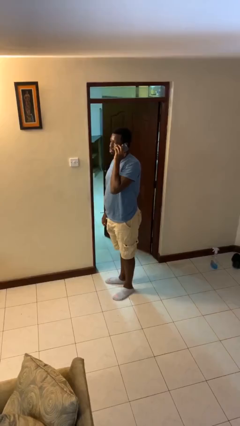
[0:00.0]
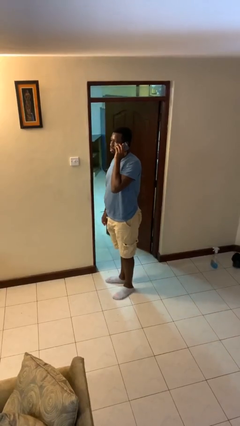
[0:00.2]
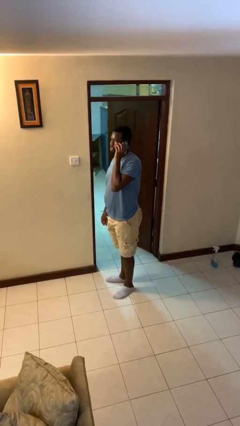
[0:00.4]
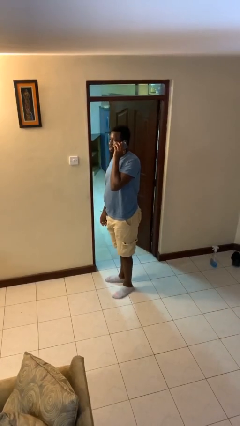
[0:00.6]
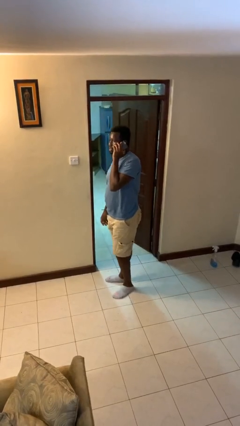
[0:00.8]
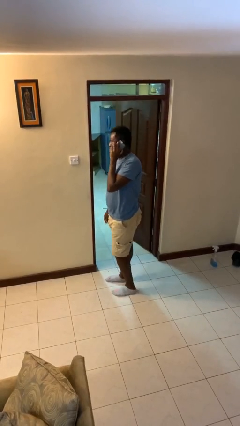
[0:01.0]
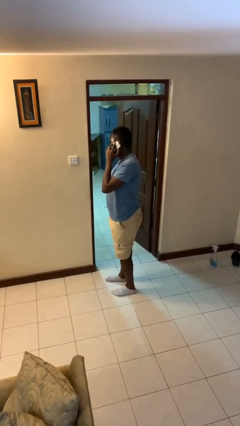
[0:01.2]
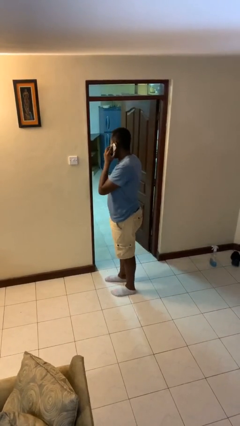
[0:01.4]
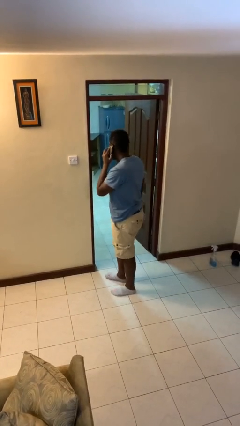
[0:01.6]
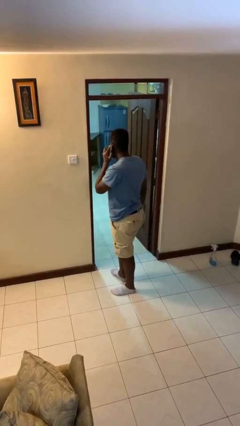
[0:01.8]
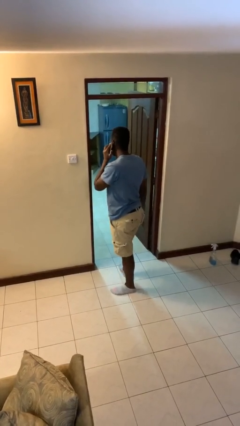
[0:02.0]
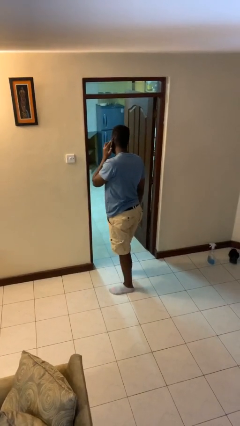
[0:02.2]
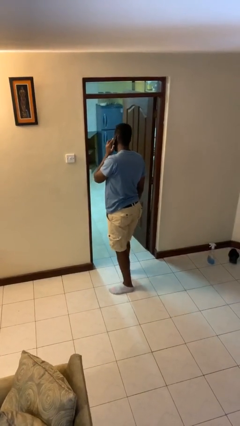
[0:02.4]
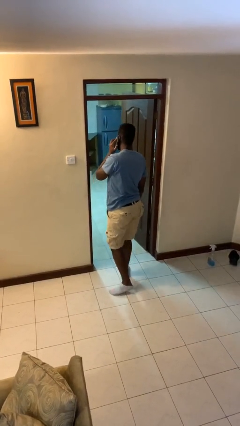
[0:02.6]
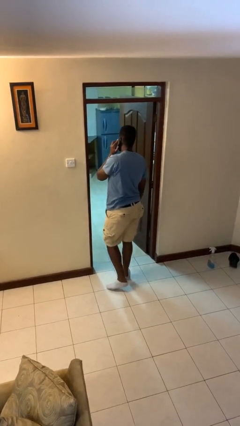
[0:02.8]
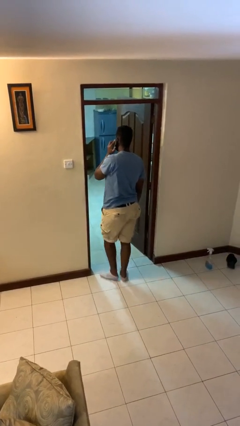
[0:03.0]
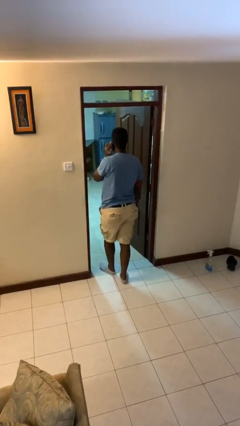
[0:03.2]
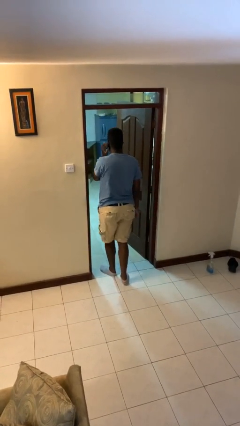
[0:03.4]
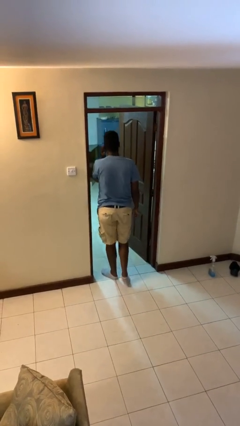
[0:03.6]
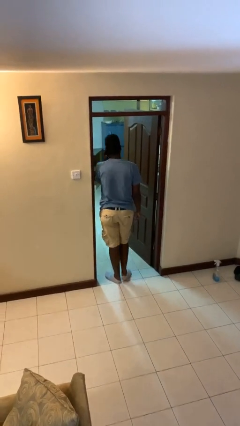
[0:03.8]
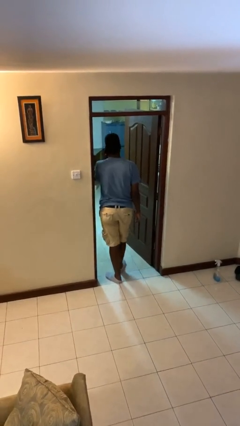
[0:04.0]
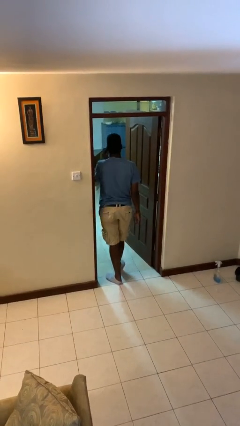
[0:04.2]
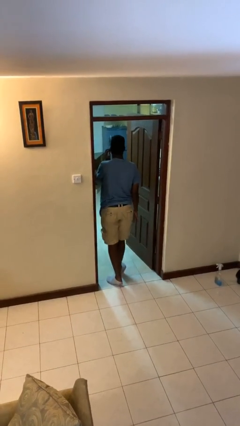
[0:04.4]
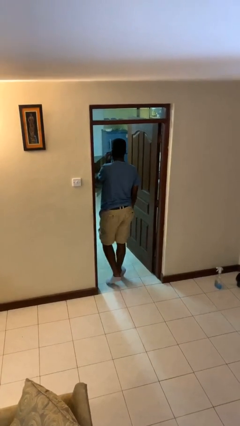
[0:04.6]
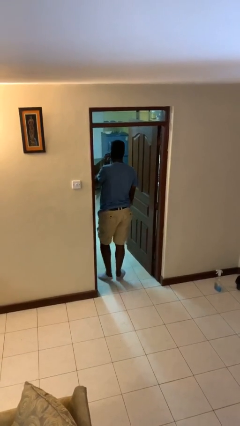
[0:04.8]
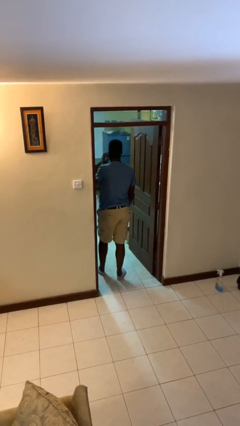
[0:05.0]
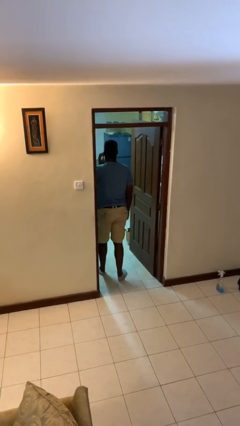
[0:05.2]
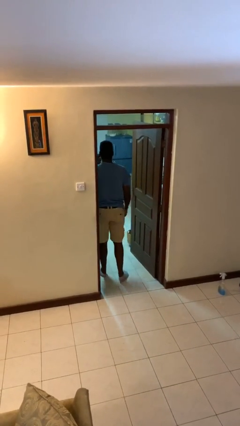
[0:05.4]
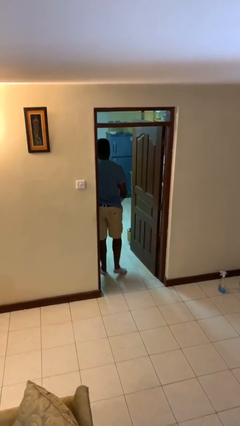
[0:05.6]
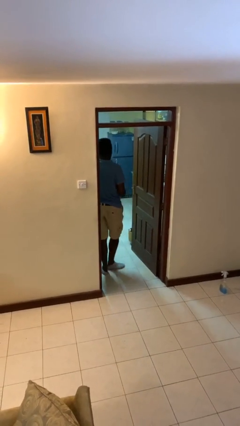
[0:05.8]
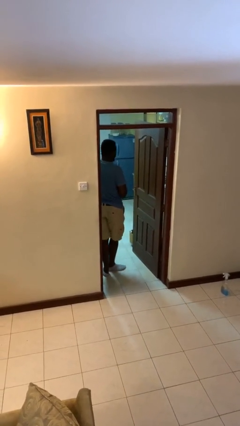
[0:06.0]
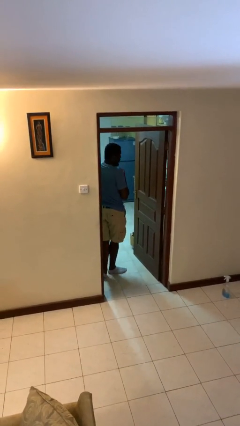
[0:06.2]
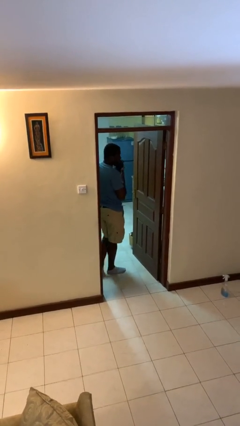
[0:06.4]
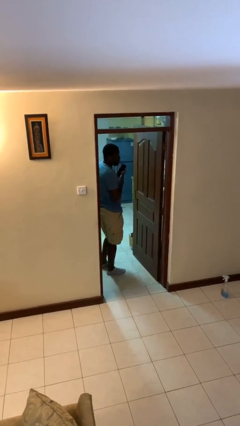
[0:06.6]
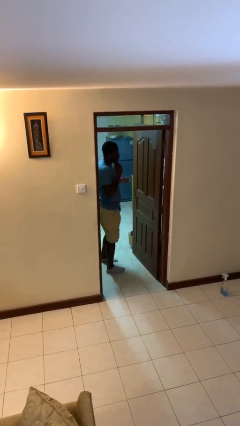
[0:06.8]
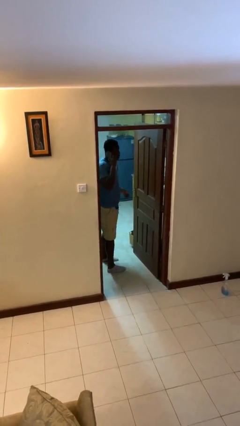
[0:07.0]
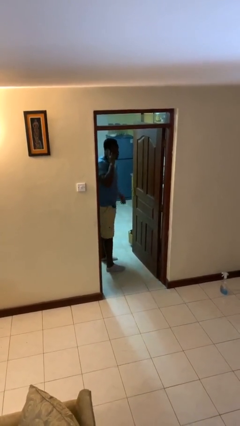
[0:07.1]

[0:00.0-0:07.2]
person exits scene through structure

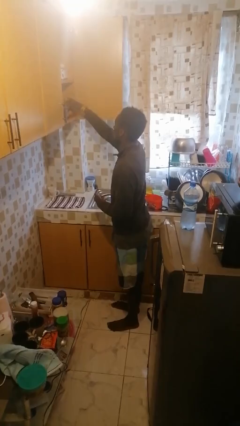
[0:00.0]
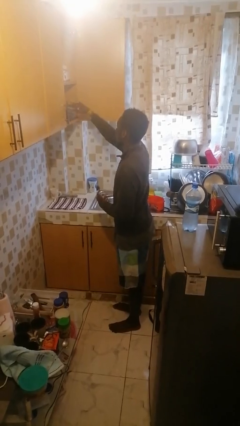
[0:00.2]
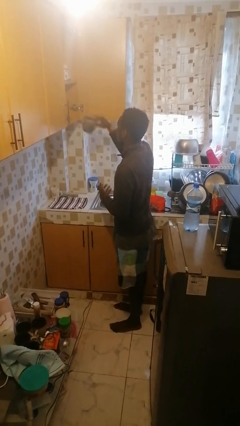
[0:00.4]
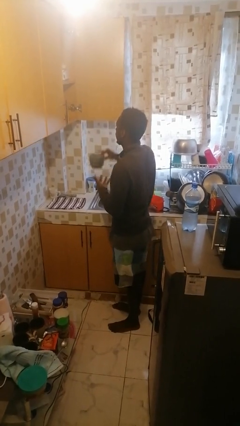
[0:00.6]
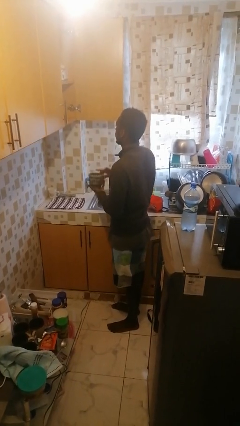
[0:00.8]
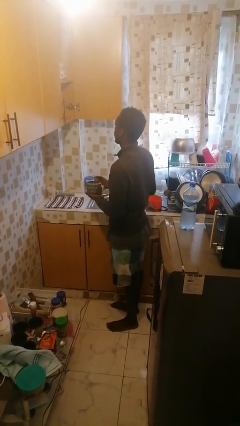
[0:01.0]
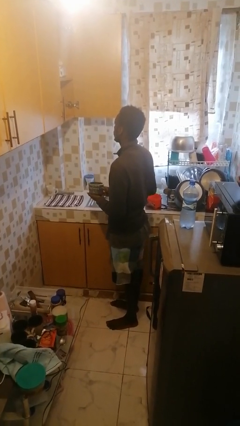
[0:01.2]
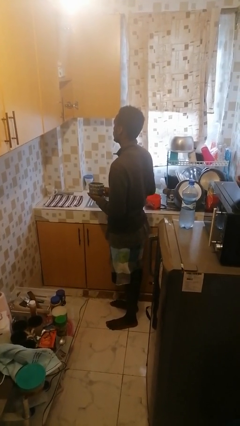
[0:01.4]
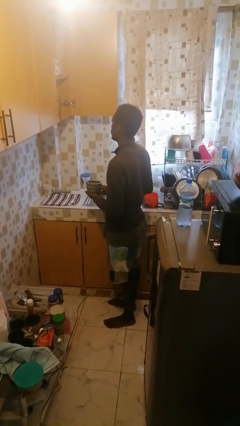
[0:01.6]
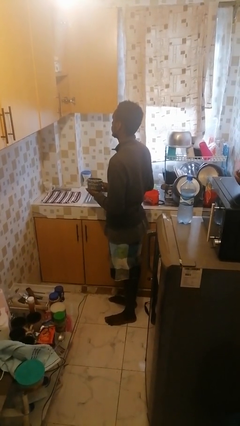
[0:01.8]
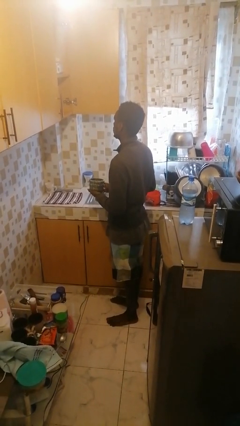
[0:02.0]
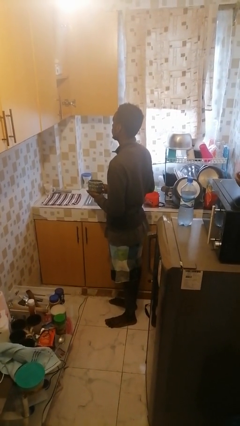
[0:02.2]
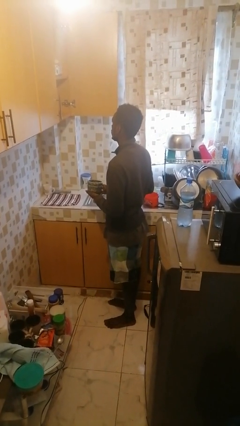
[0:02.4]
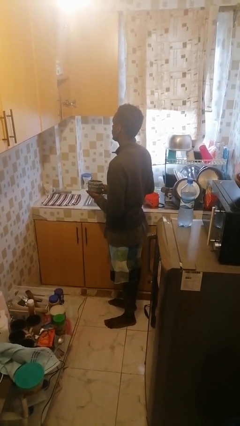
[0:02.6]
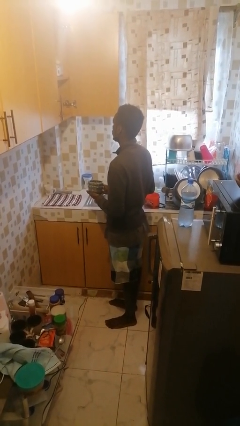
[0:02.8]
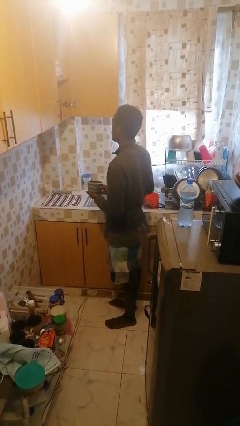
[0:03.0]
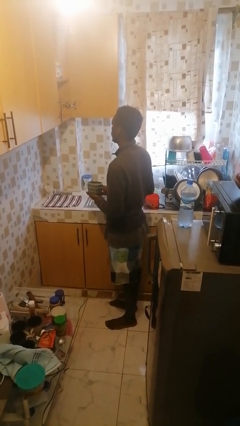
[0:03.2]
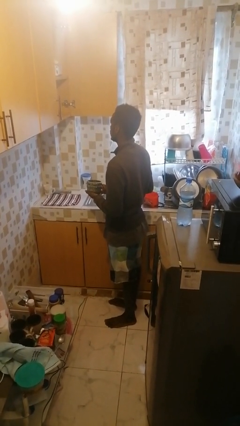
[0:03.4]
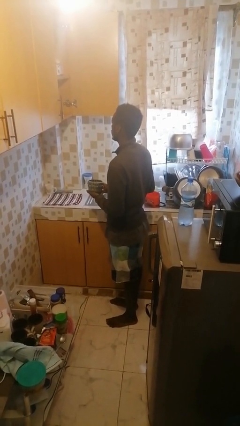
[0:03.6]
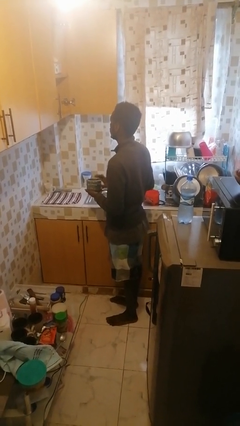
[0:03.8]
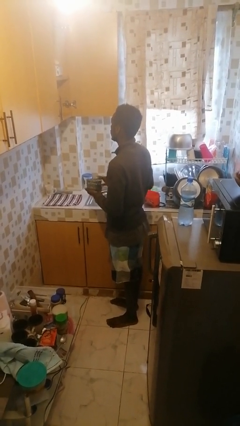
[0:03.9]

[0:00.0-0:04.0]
person picks up object from cabinet

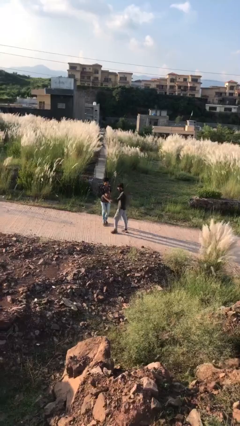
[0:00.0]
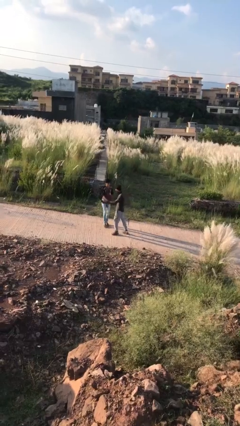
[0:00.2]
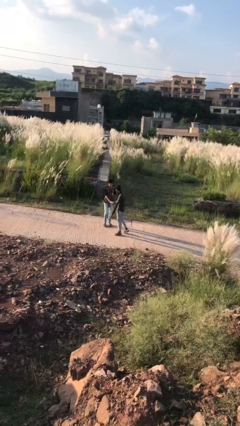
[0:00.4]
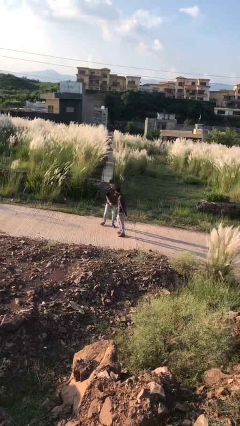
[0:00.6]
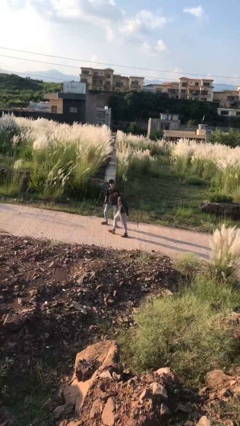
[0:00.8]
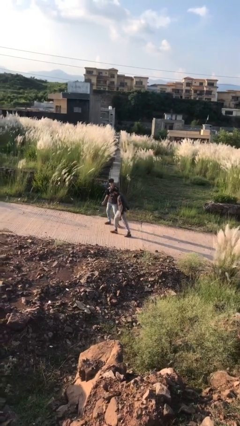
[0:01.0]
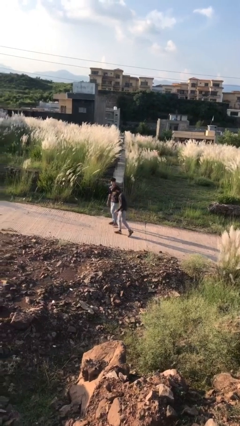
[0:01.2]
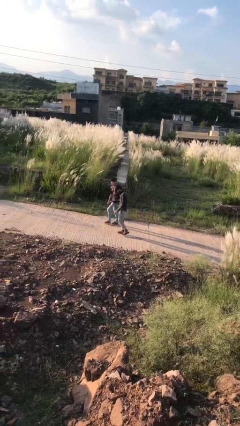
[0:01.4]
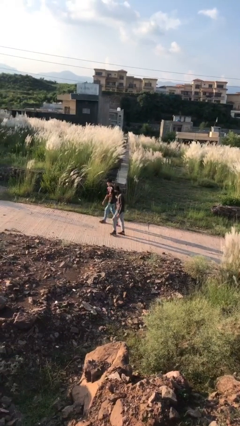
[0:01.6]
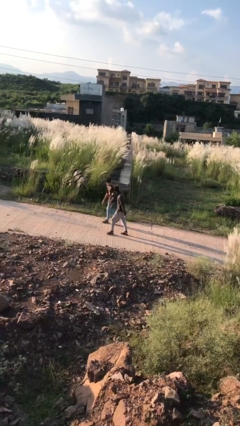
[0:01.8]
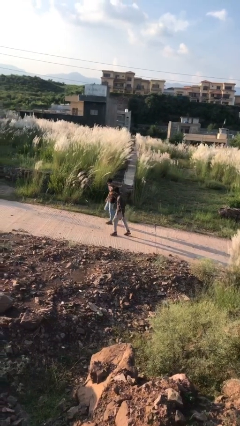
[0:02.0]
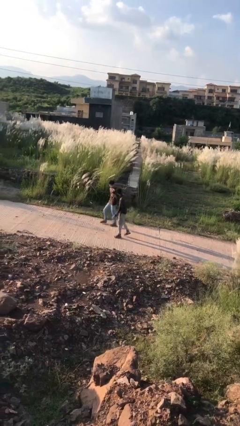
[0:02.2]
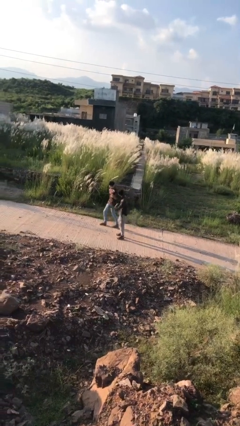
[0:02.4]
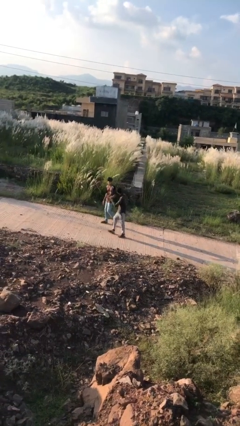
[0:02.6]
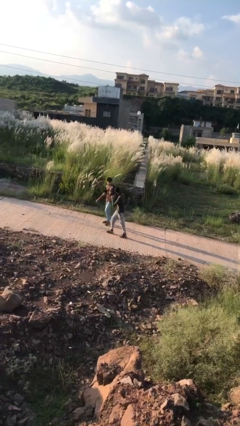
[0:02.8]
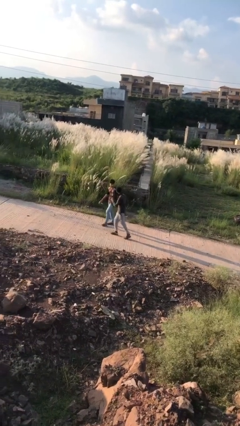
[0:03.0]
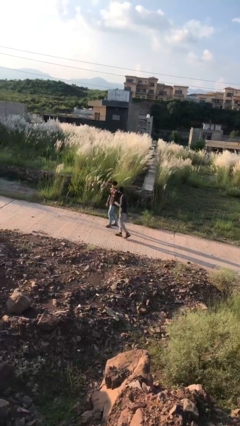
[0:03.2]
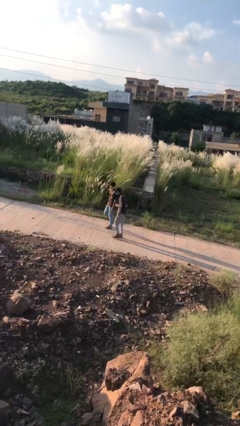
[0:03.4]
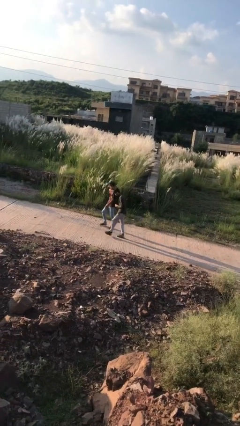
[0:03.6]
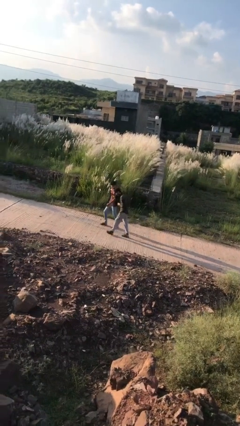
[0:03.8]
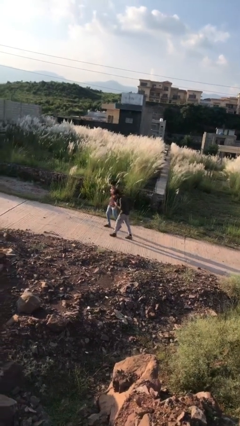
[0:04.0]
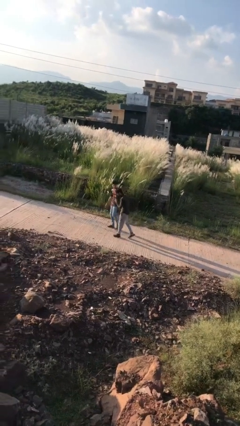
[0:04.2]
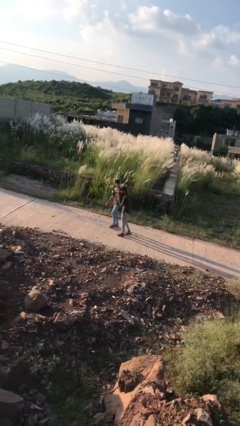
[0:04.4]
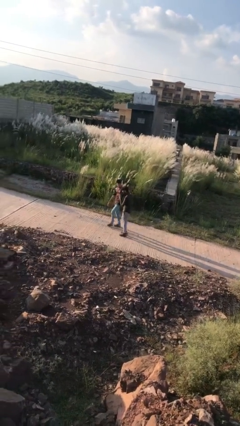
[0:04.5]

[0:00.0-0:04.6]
person talks to person

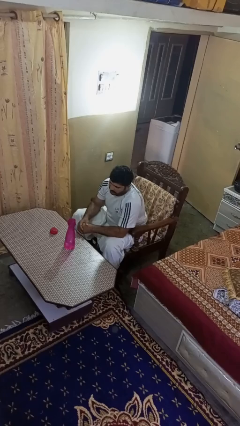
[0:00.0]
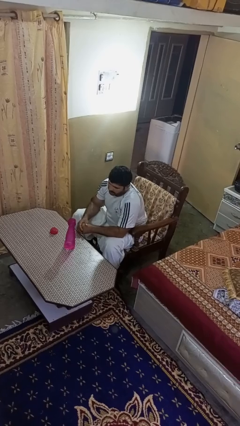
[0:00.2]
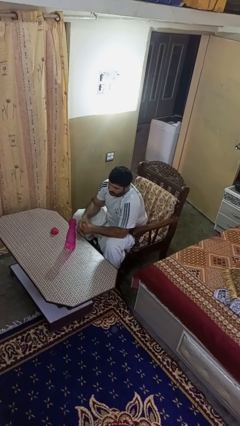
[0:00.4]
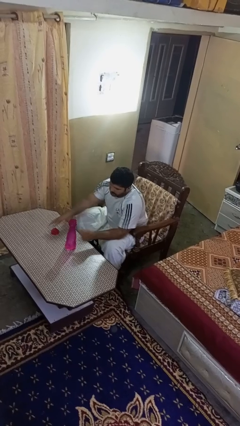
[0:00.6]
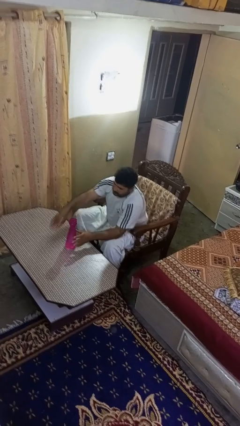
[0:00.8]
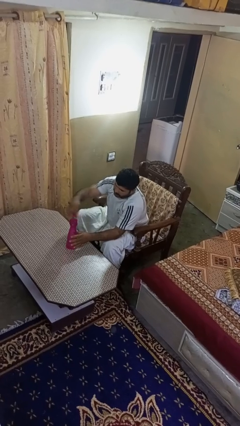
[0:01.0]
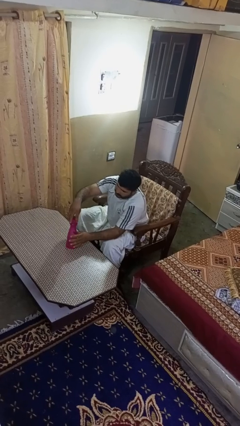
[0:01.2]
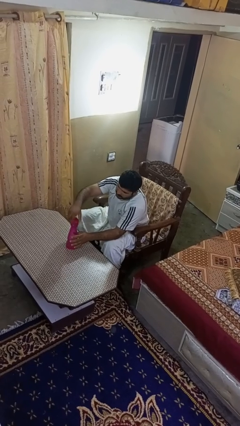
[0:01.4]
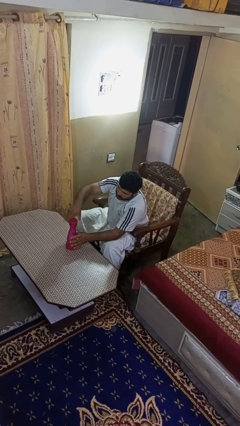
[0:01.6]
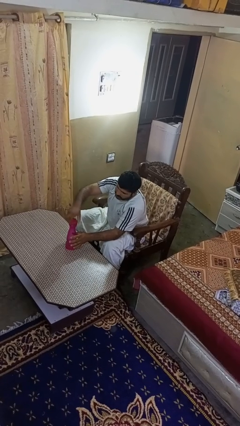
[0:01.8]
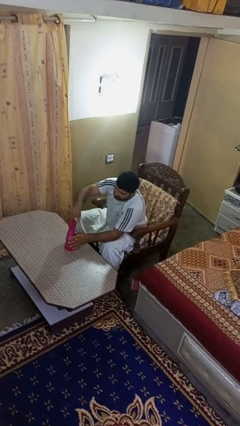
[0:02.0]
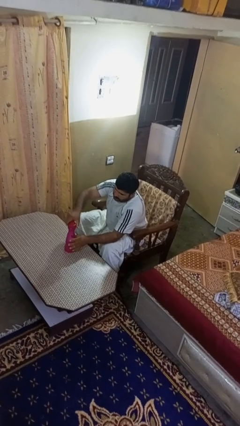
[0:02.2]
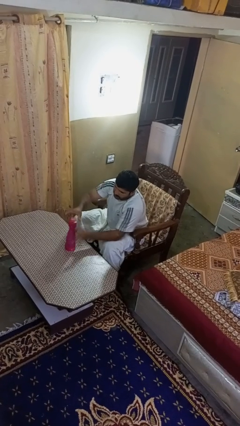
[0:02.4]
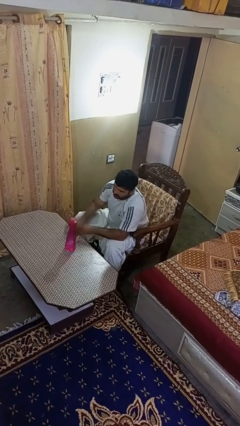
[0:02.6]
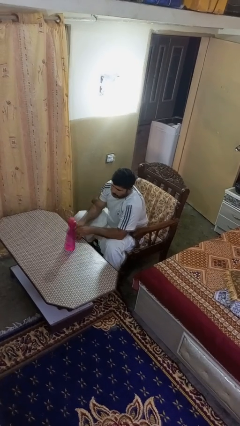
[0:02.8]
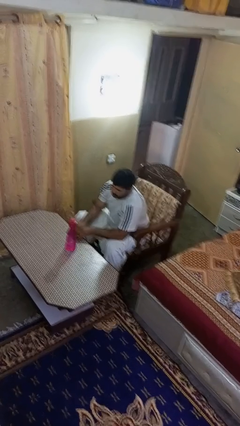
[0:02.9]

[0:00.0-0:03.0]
person screws lid to bottle
